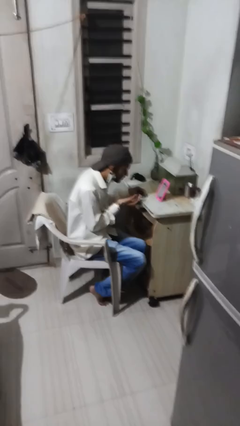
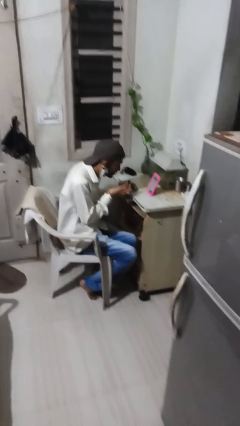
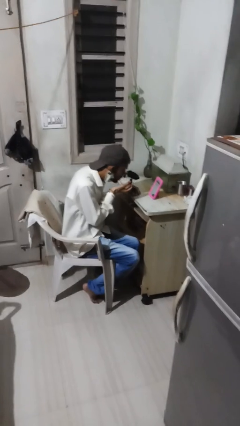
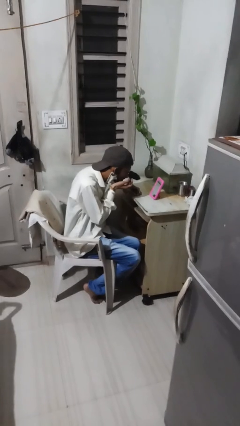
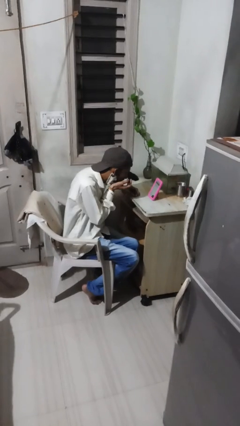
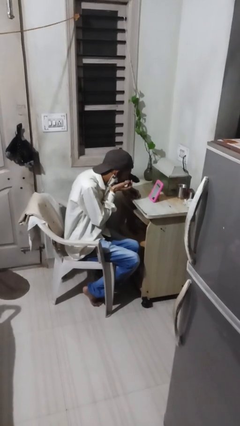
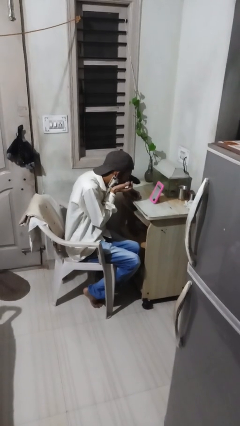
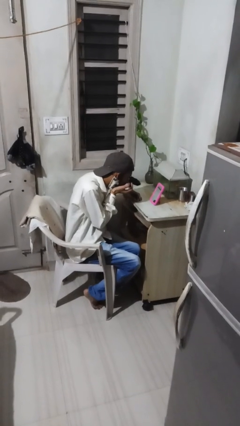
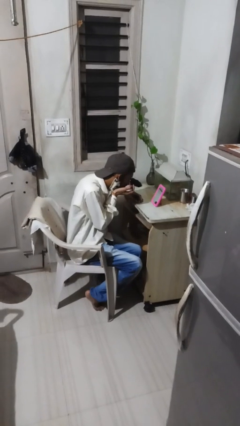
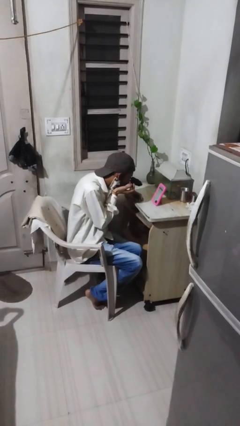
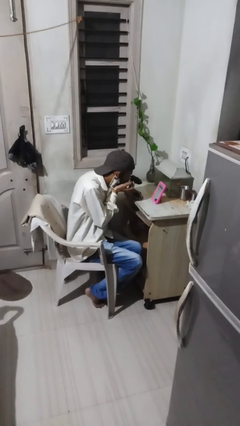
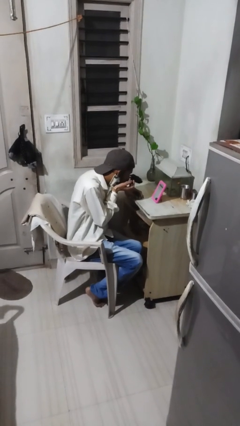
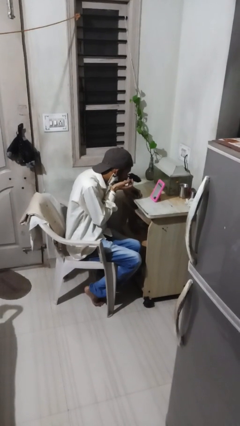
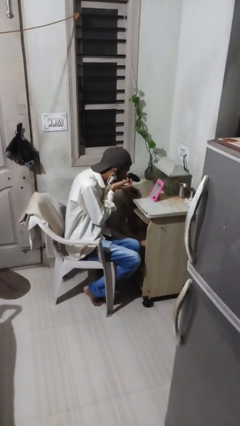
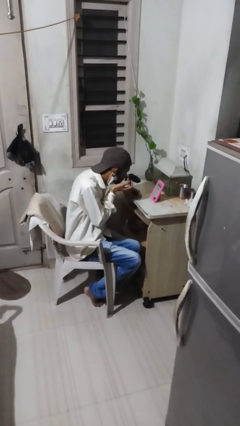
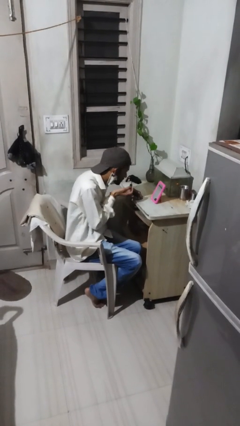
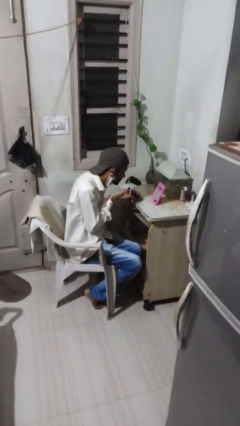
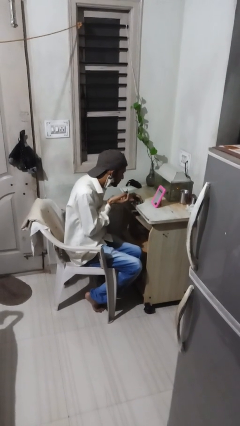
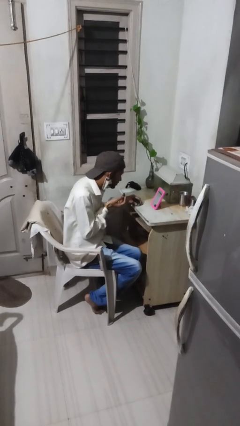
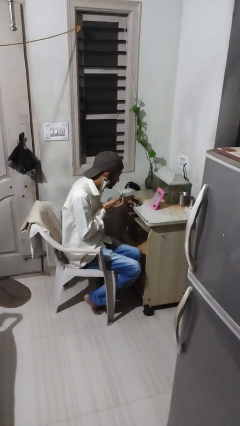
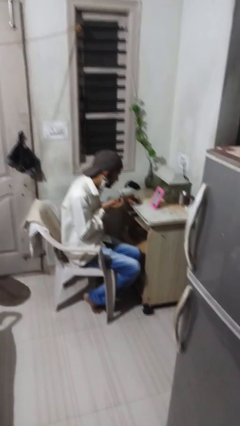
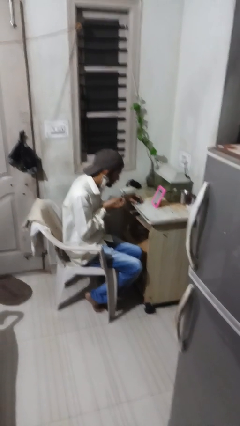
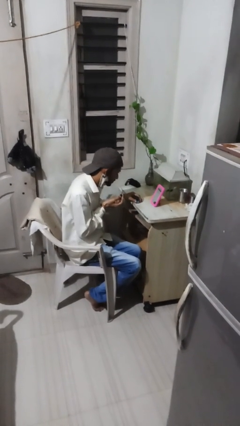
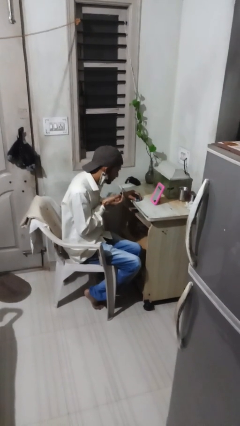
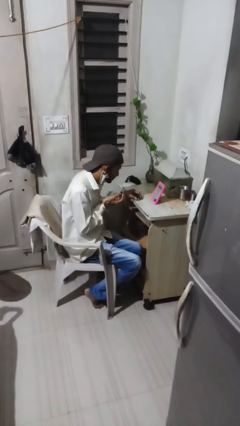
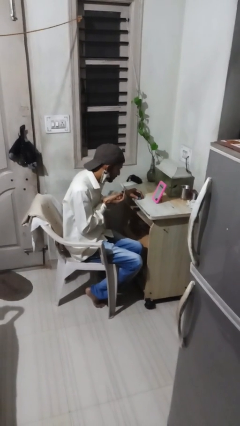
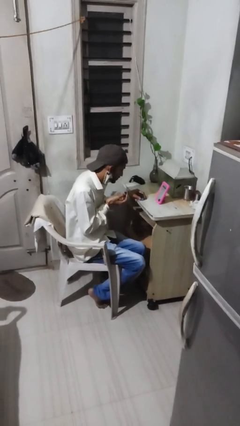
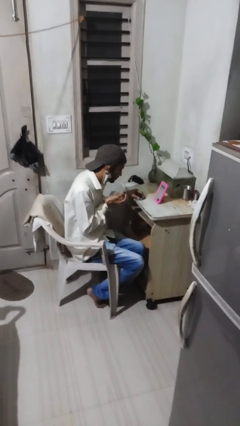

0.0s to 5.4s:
person applies eye makeup

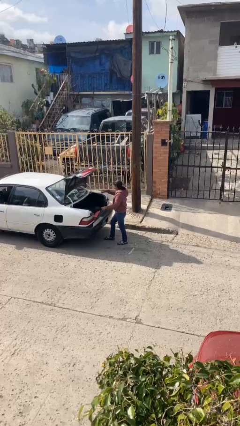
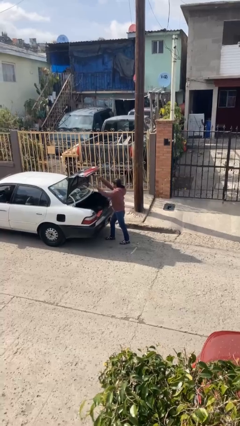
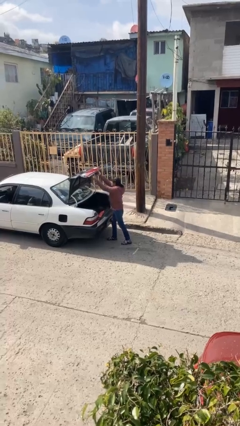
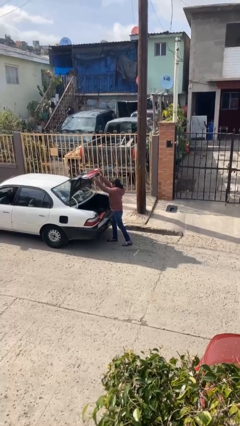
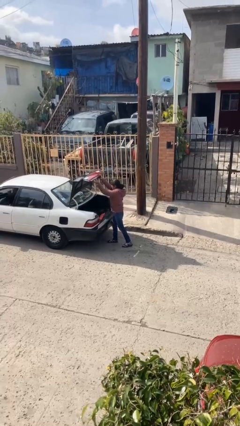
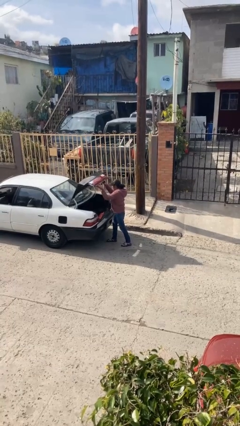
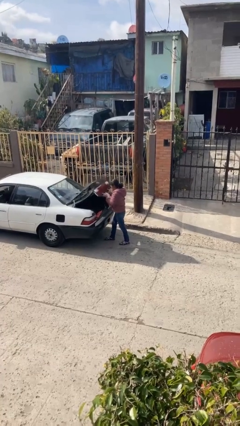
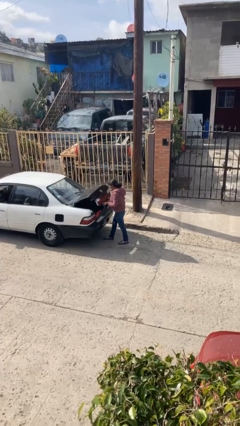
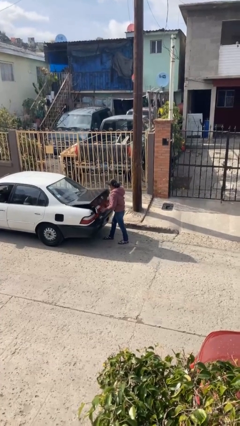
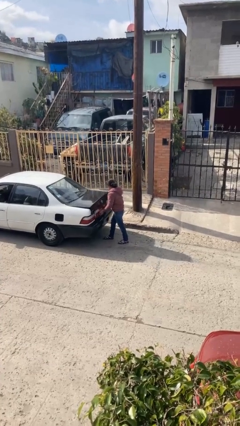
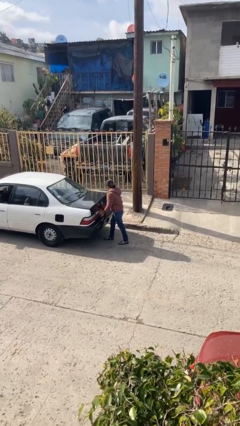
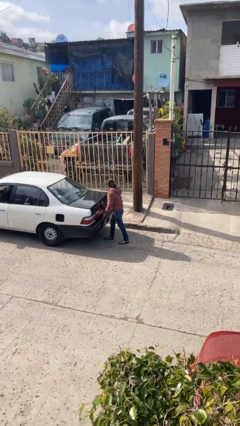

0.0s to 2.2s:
person closes car trunk

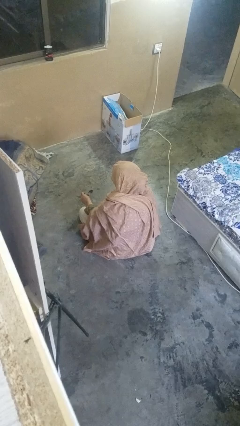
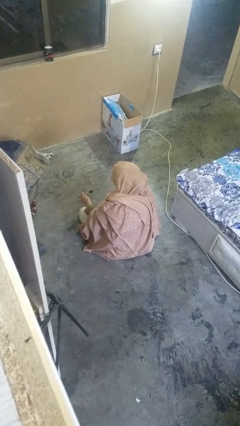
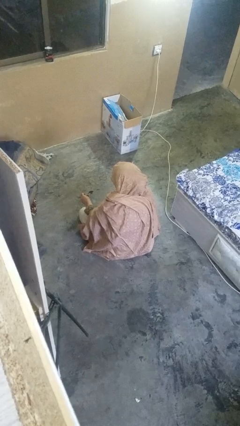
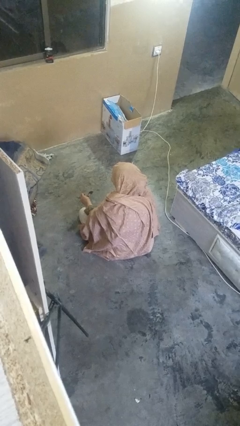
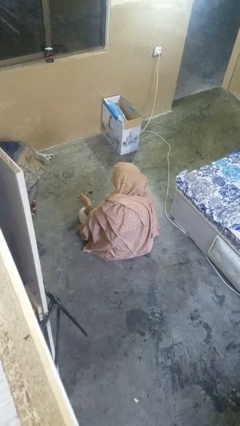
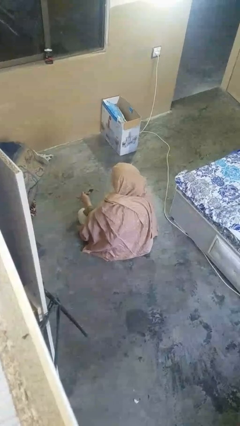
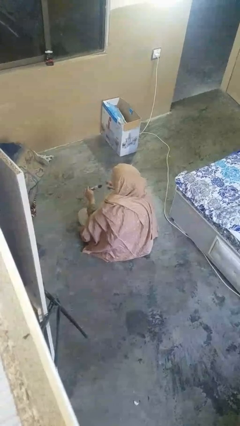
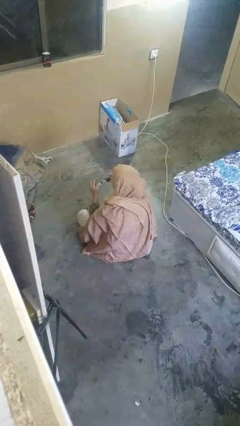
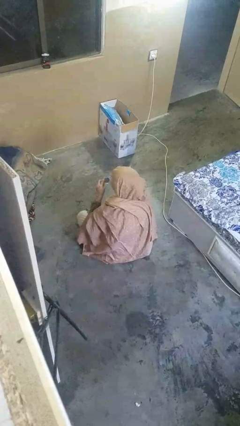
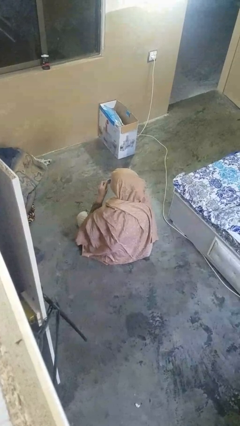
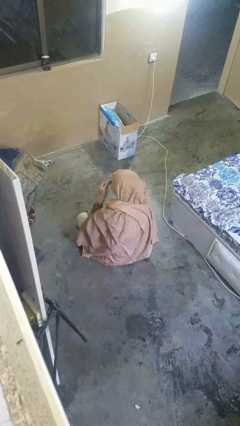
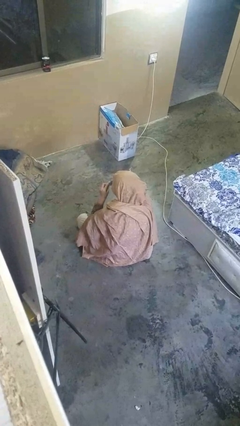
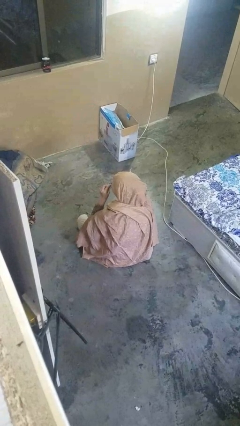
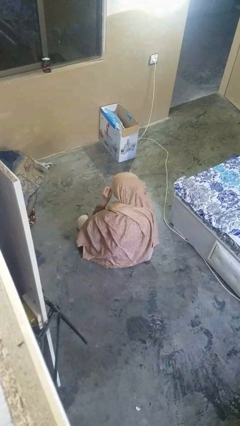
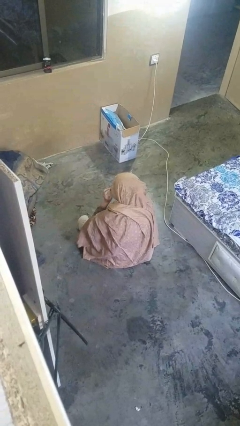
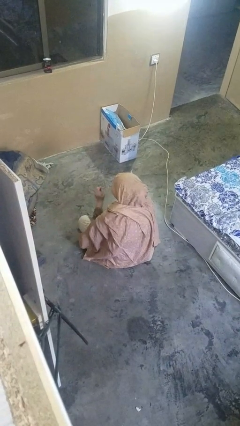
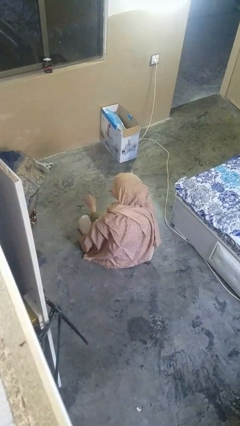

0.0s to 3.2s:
person puts on glasses

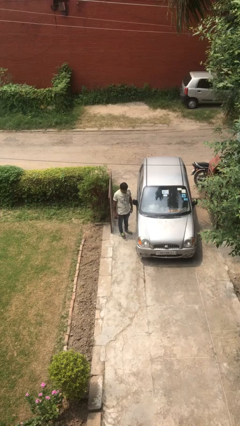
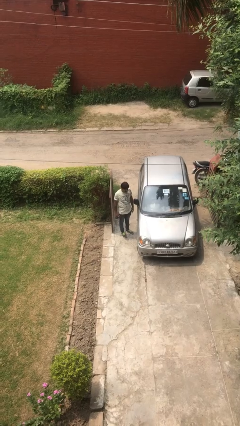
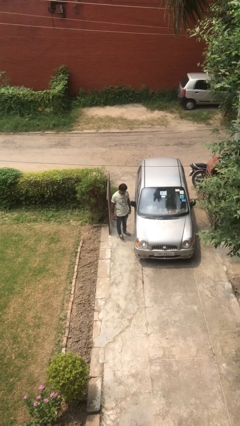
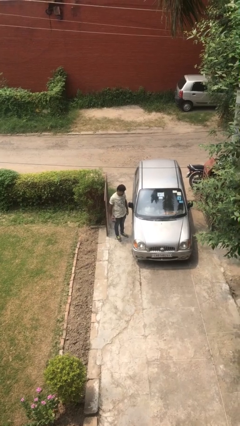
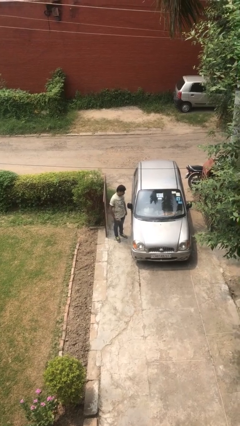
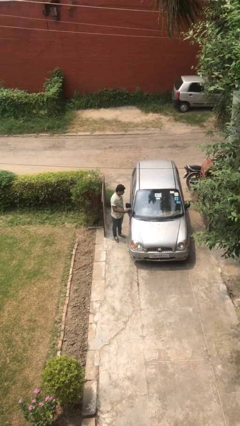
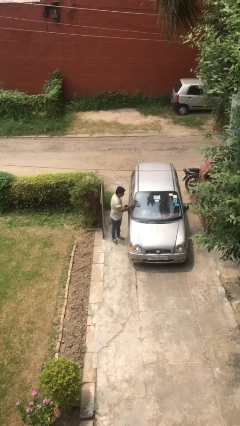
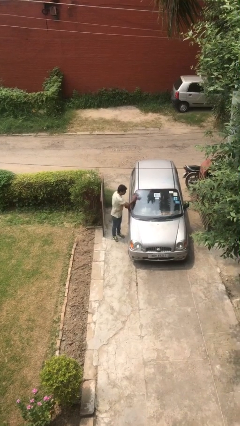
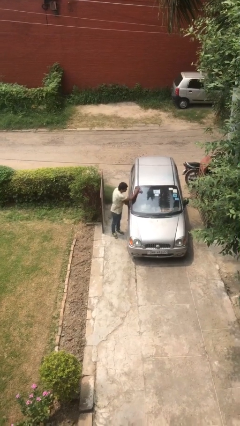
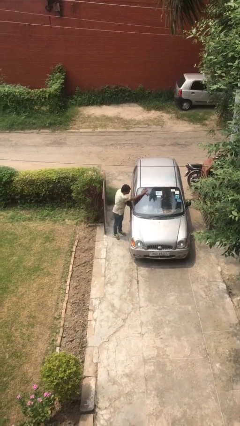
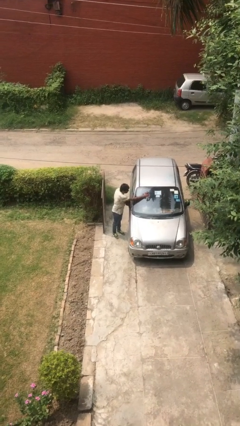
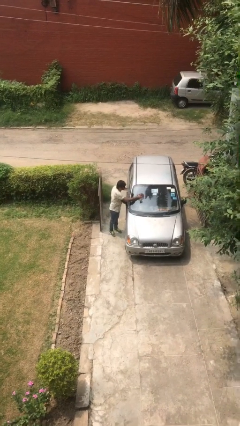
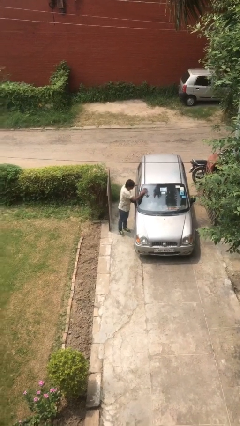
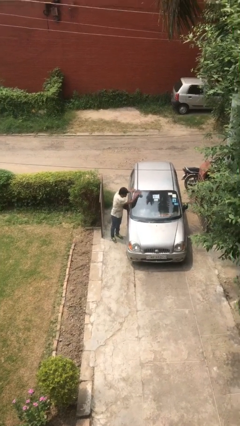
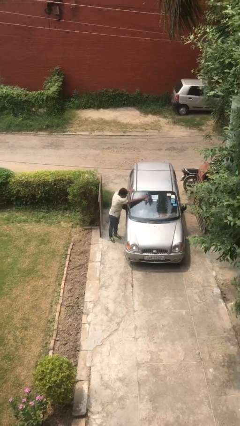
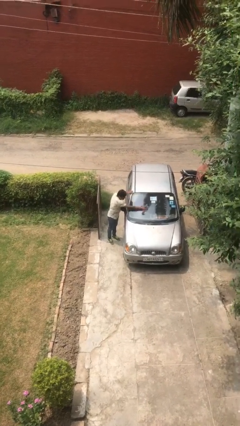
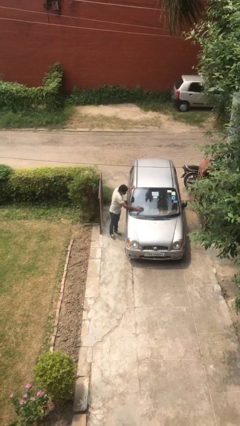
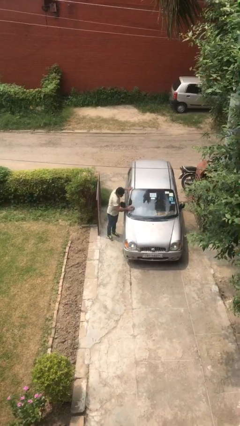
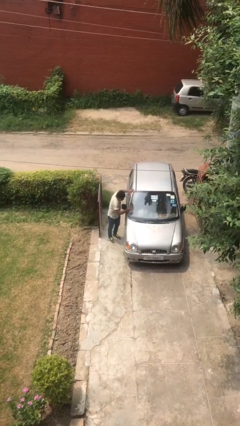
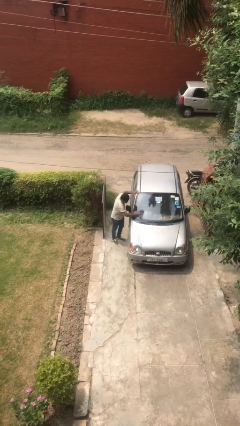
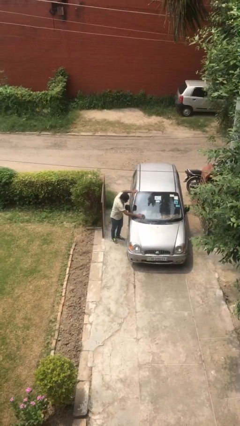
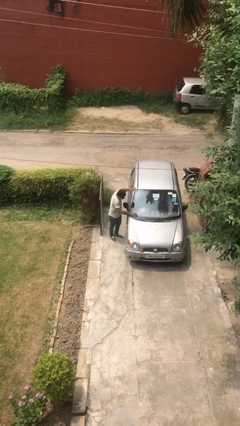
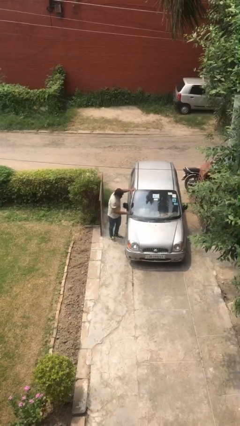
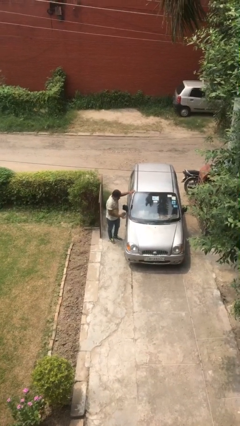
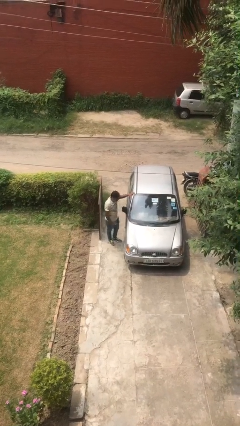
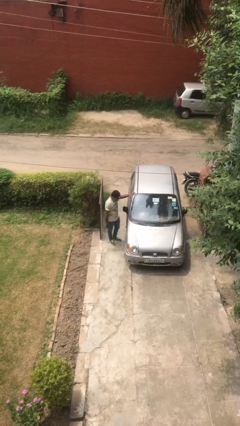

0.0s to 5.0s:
person polishes car with rag

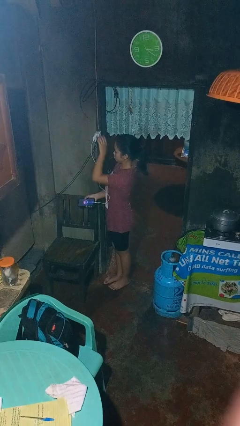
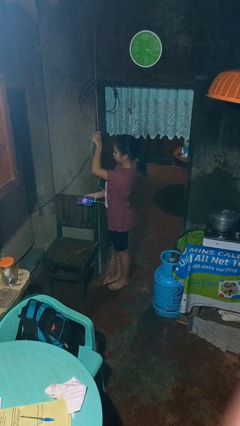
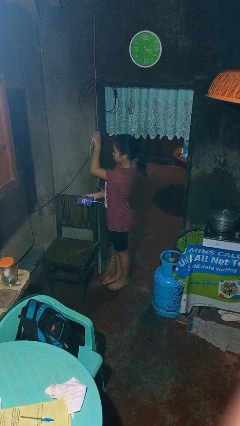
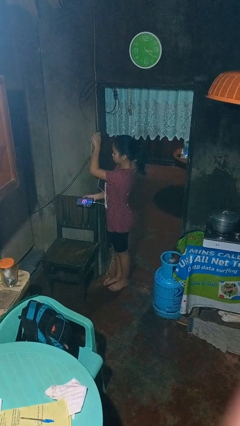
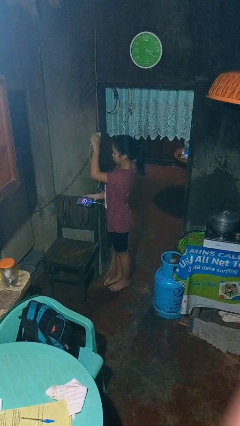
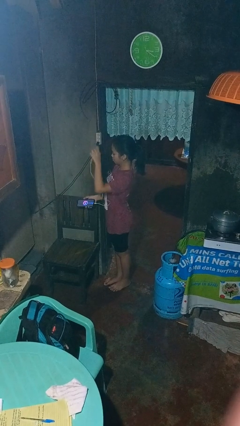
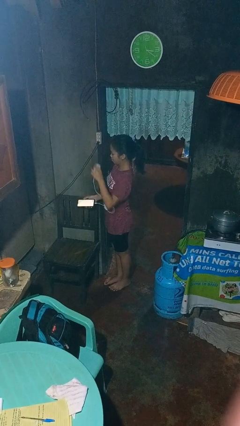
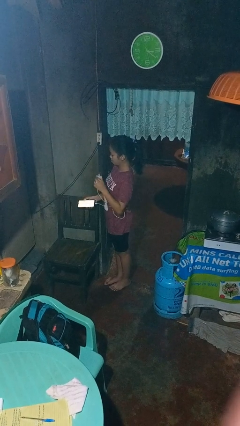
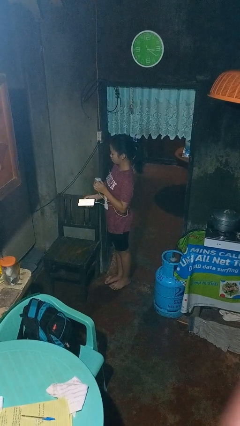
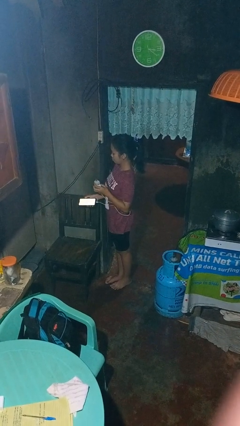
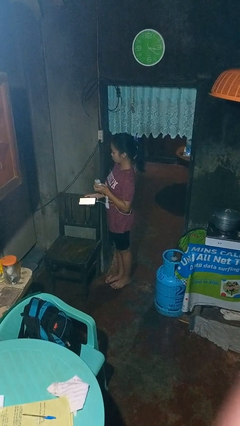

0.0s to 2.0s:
person unplugs from electrical socket
